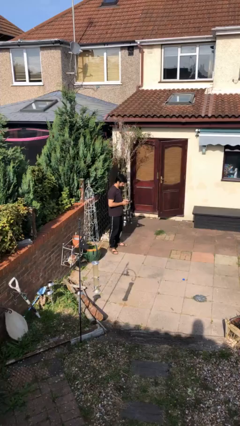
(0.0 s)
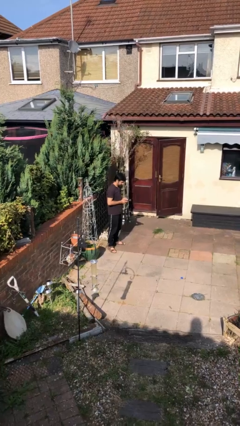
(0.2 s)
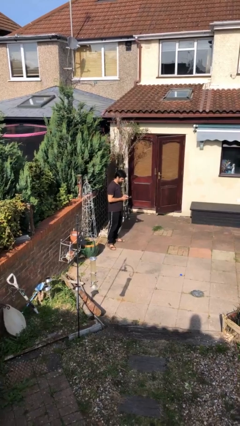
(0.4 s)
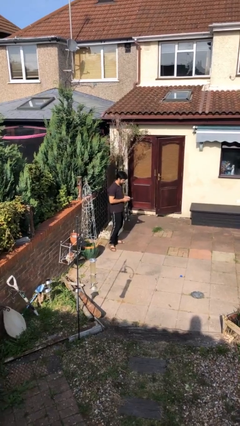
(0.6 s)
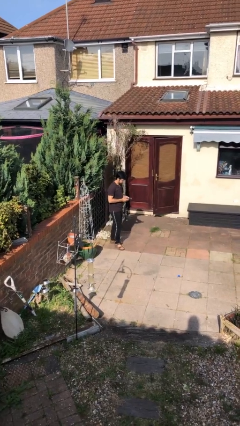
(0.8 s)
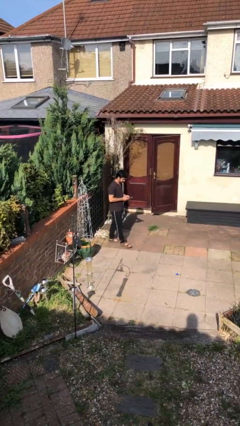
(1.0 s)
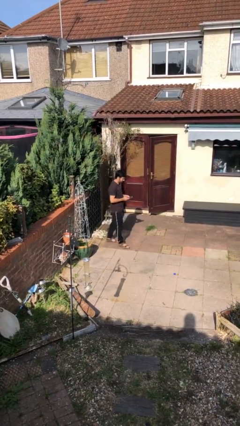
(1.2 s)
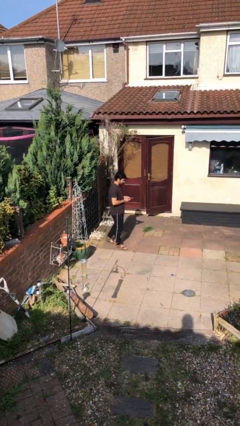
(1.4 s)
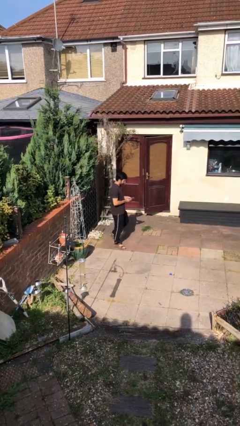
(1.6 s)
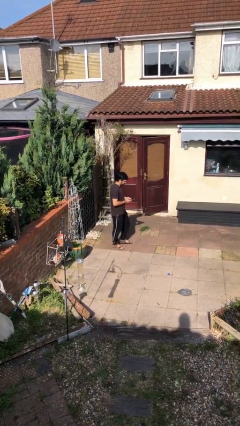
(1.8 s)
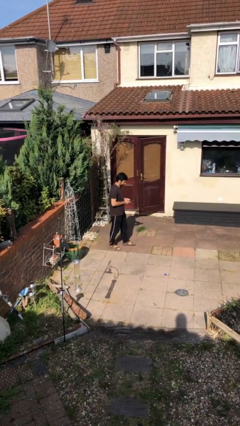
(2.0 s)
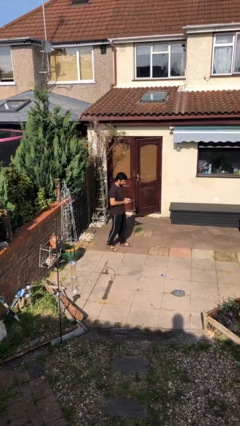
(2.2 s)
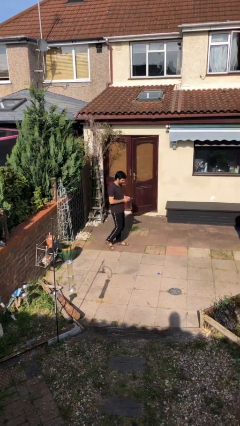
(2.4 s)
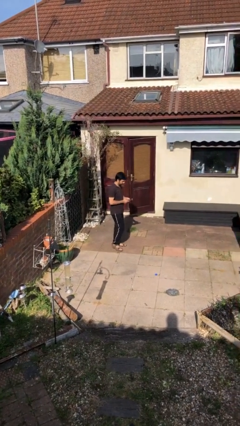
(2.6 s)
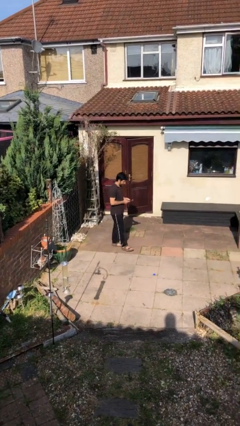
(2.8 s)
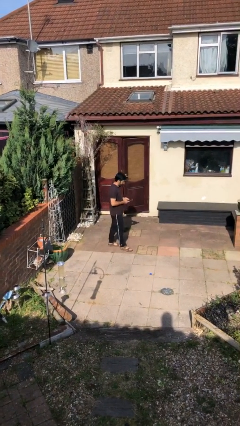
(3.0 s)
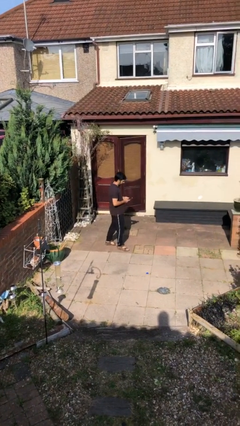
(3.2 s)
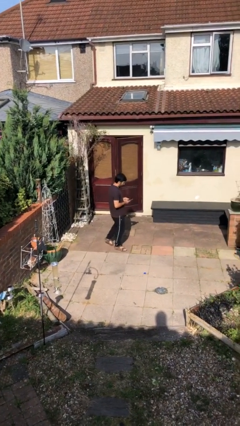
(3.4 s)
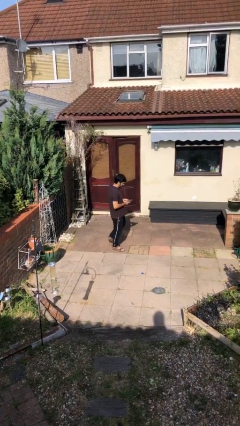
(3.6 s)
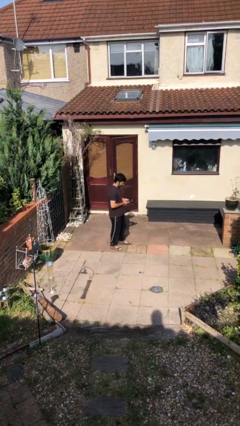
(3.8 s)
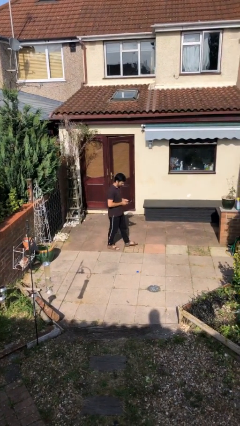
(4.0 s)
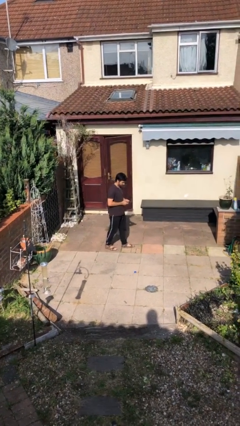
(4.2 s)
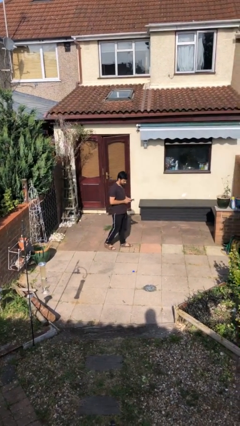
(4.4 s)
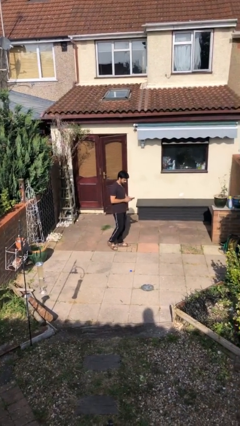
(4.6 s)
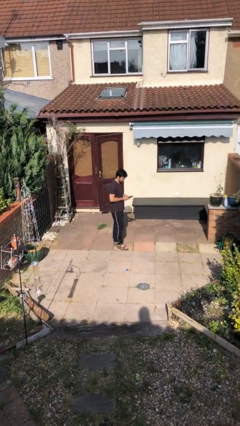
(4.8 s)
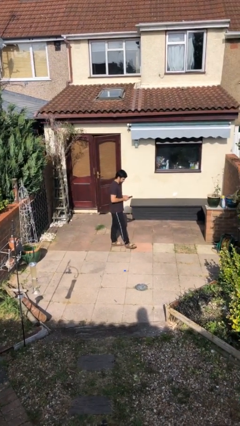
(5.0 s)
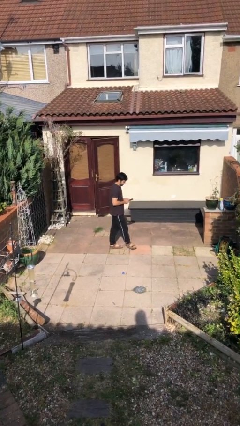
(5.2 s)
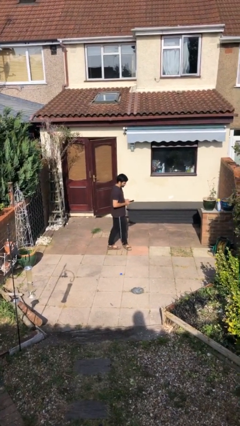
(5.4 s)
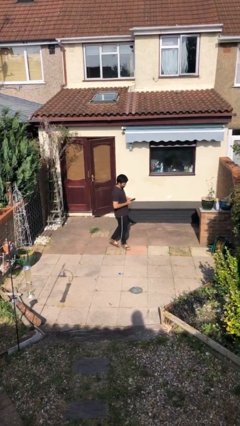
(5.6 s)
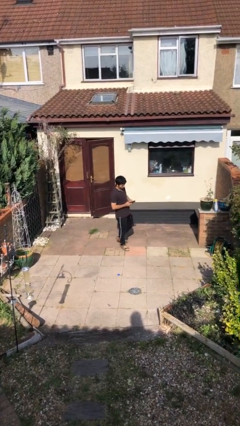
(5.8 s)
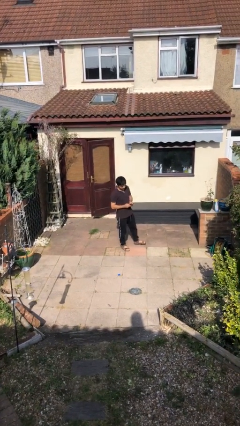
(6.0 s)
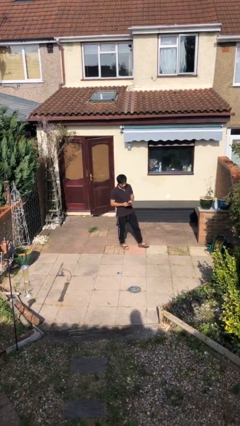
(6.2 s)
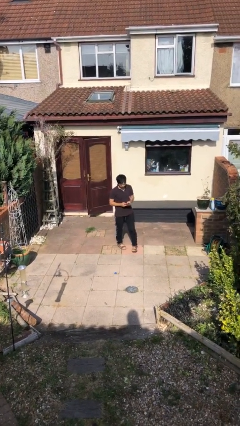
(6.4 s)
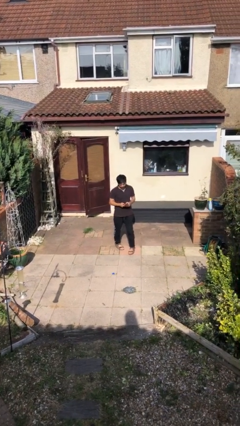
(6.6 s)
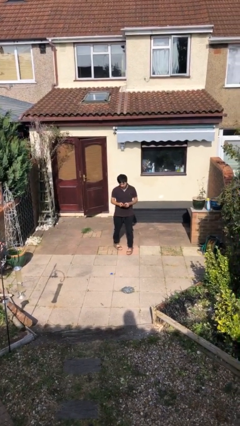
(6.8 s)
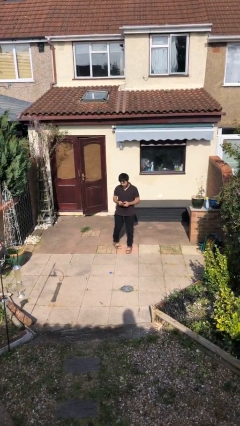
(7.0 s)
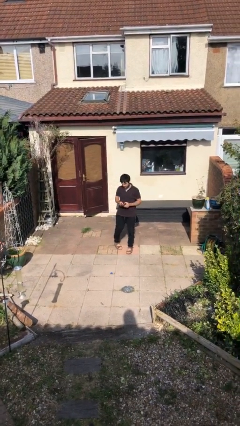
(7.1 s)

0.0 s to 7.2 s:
person texts on phone

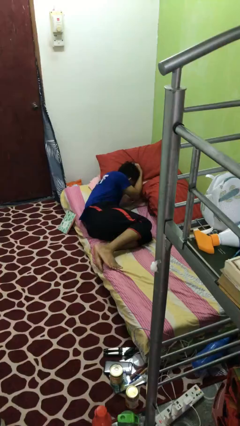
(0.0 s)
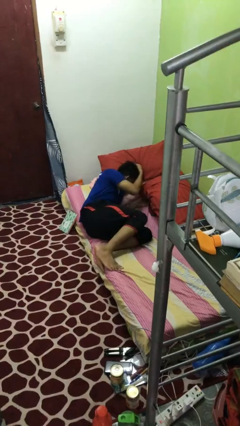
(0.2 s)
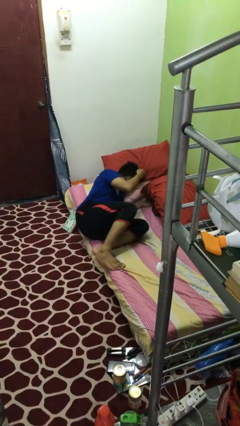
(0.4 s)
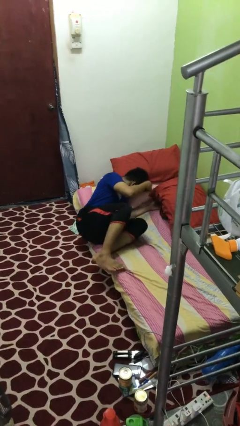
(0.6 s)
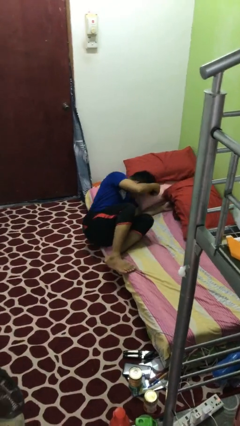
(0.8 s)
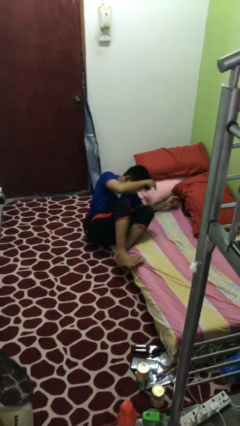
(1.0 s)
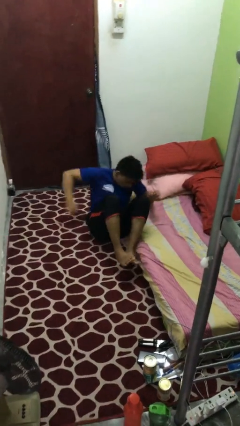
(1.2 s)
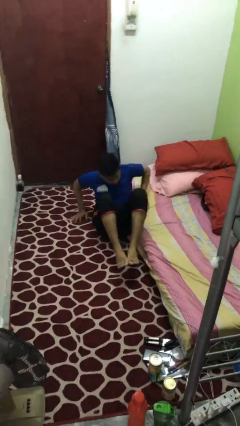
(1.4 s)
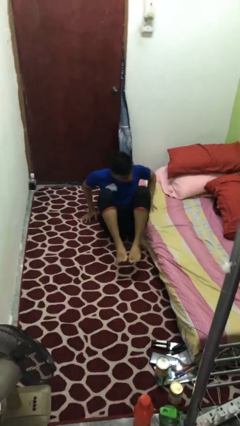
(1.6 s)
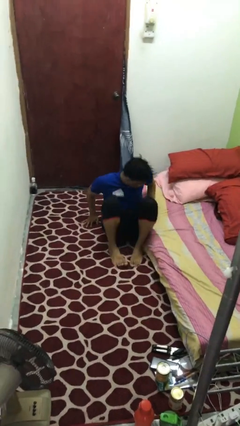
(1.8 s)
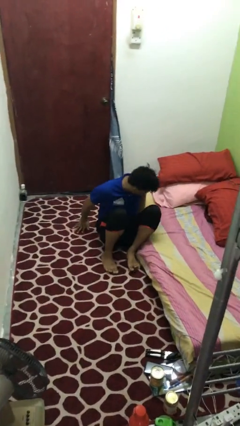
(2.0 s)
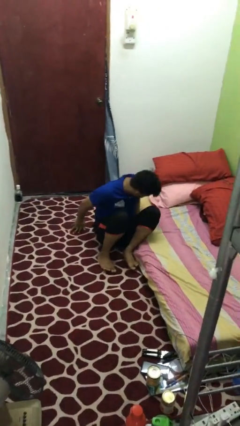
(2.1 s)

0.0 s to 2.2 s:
person falls from bed

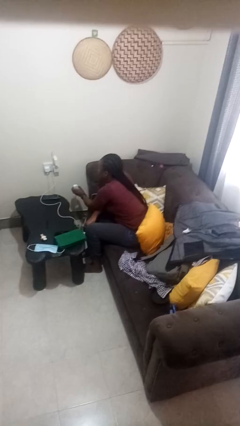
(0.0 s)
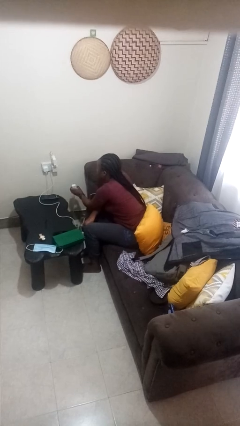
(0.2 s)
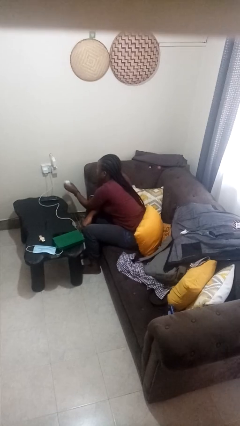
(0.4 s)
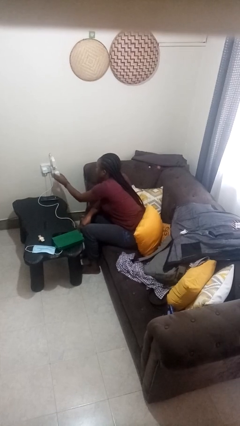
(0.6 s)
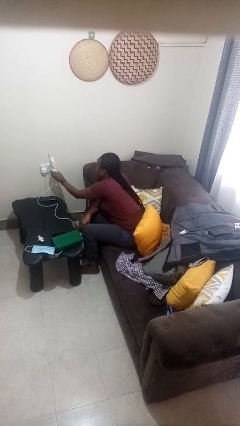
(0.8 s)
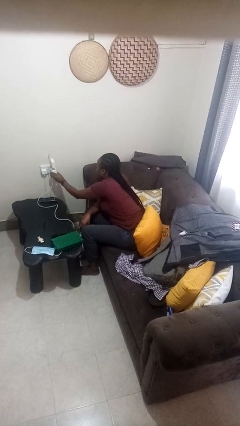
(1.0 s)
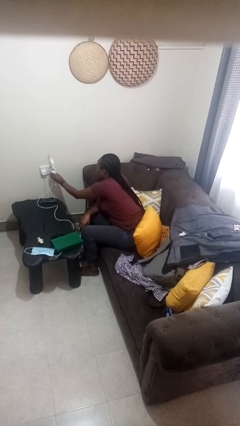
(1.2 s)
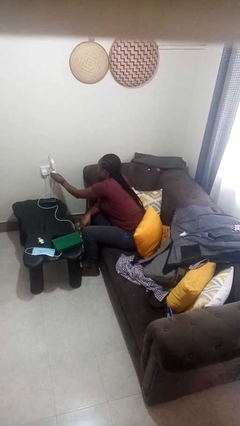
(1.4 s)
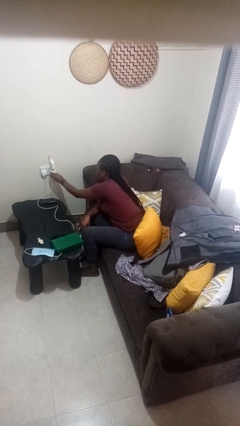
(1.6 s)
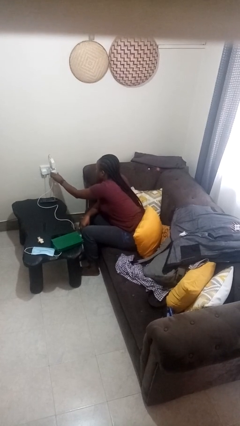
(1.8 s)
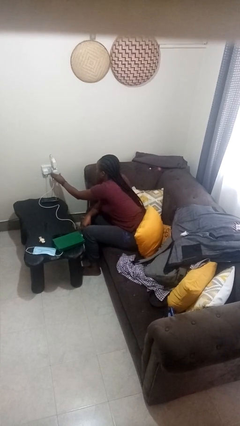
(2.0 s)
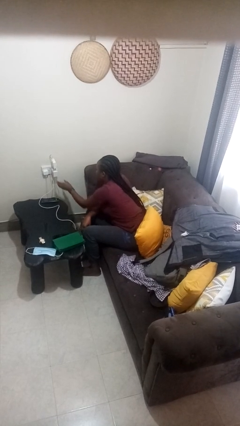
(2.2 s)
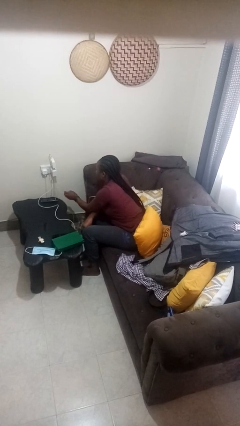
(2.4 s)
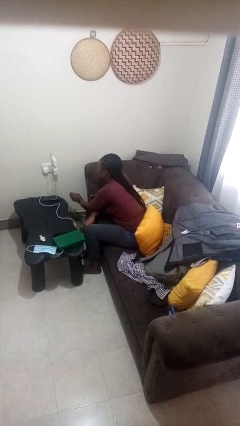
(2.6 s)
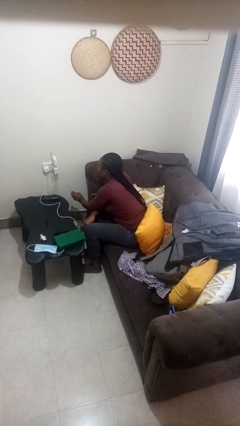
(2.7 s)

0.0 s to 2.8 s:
person plugs into electrical socket

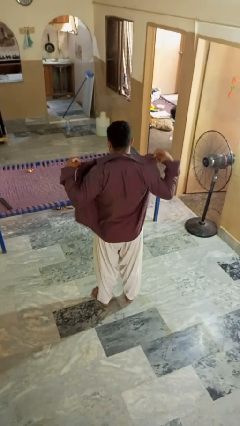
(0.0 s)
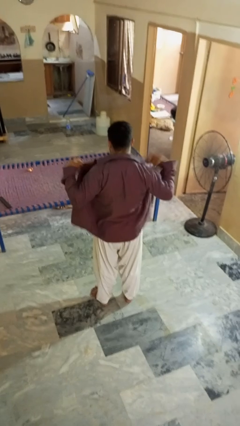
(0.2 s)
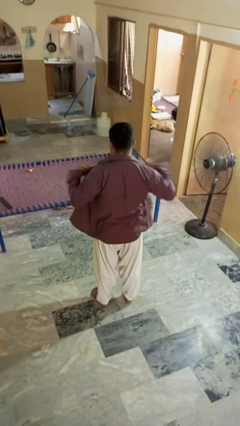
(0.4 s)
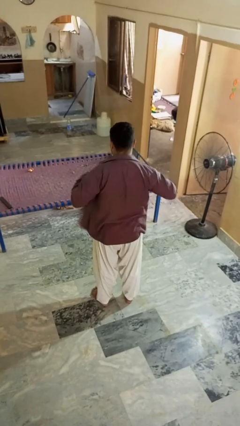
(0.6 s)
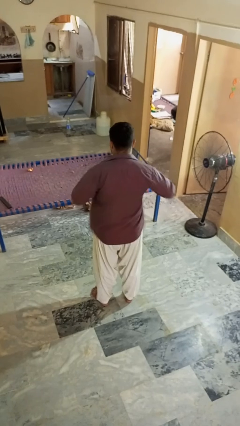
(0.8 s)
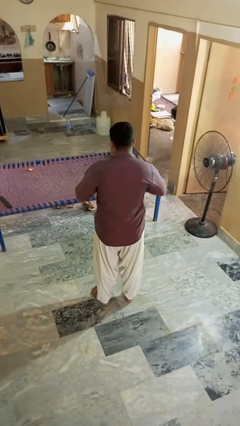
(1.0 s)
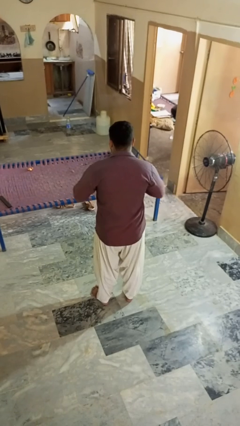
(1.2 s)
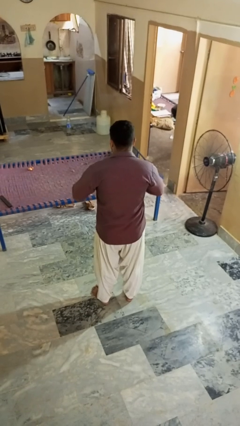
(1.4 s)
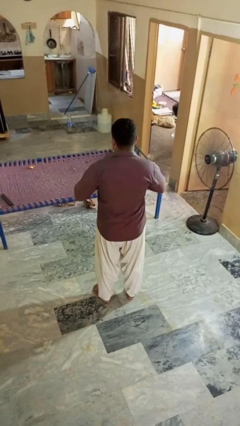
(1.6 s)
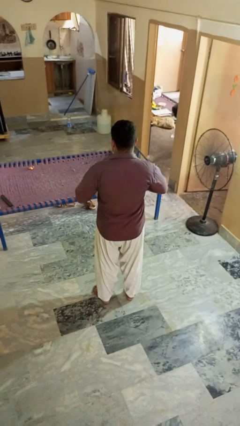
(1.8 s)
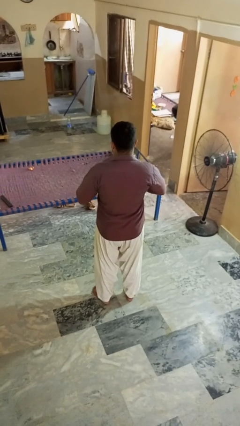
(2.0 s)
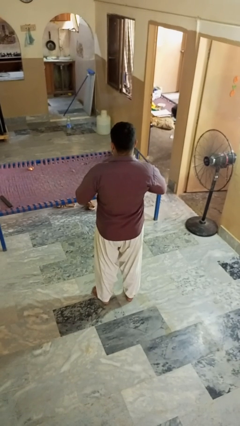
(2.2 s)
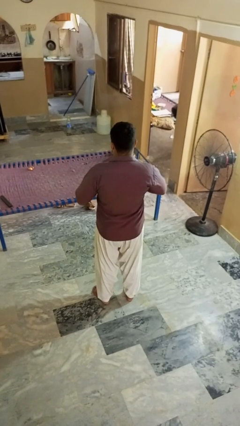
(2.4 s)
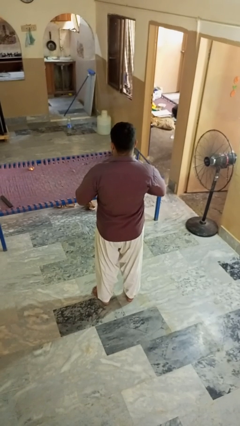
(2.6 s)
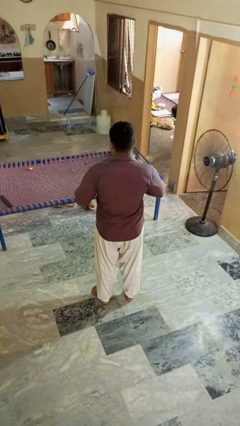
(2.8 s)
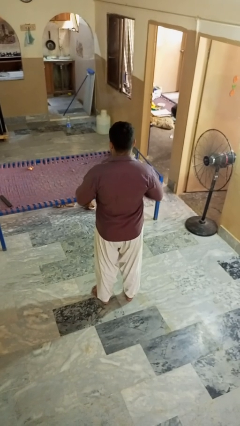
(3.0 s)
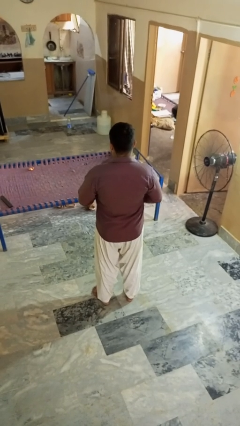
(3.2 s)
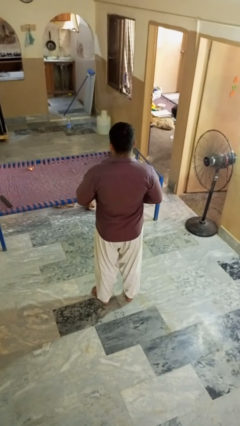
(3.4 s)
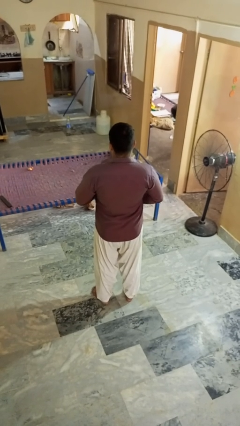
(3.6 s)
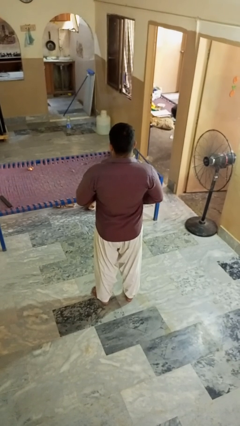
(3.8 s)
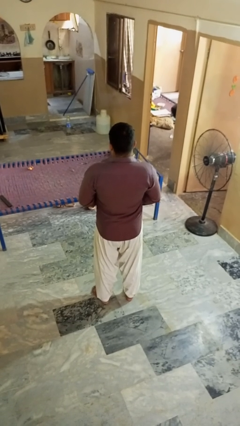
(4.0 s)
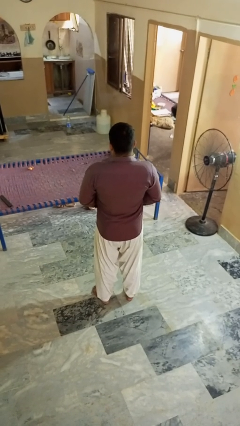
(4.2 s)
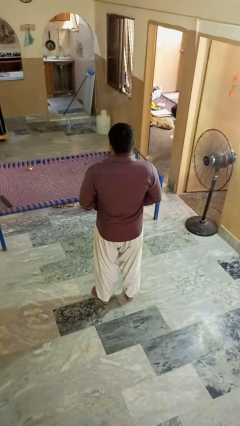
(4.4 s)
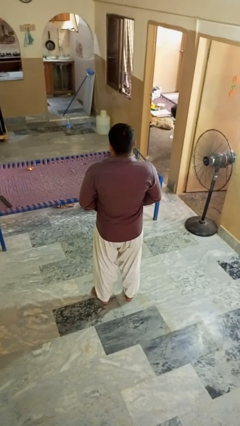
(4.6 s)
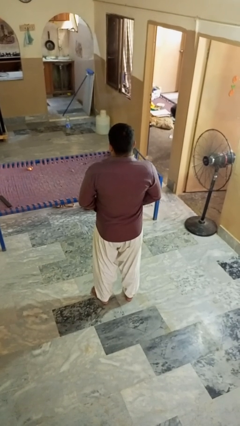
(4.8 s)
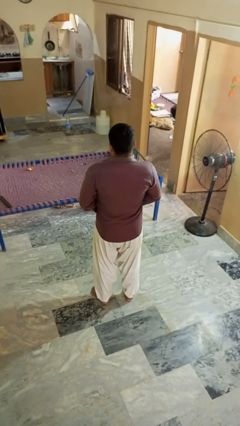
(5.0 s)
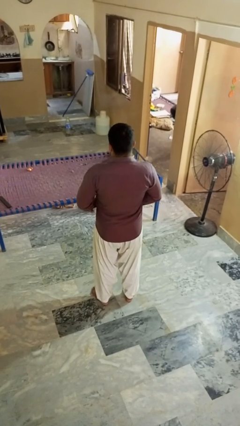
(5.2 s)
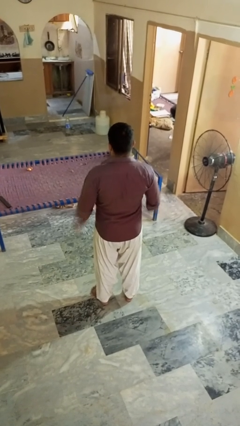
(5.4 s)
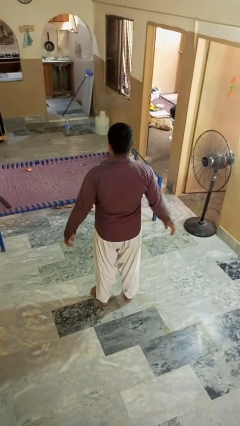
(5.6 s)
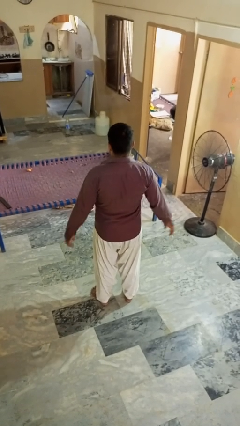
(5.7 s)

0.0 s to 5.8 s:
person buttons shirt
